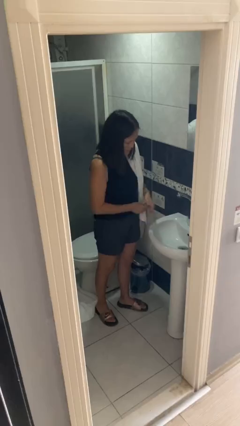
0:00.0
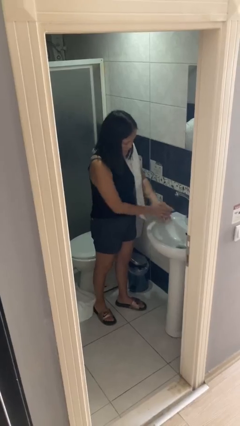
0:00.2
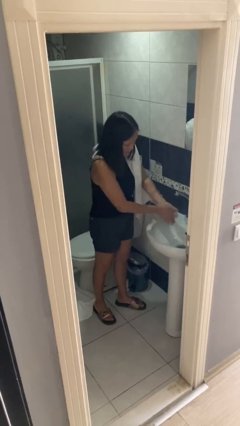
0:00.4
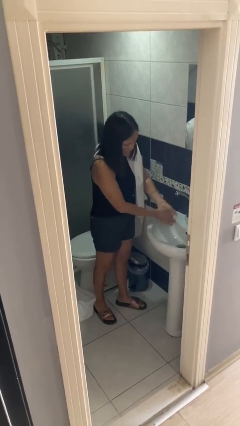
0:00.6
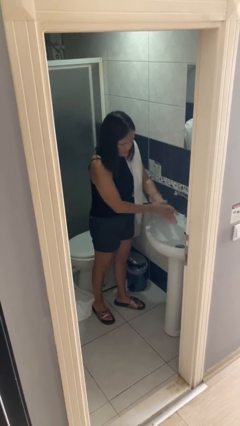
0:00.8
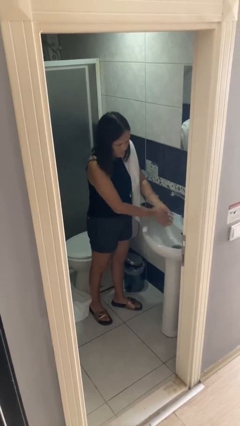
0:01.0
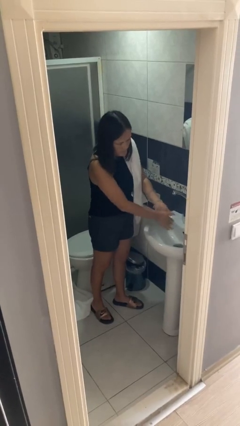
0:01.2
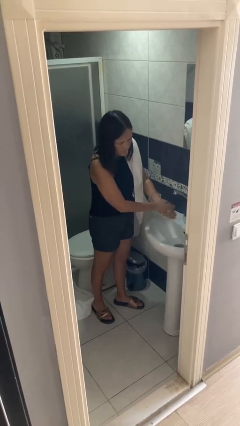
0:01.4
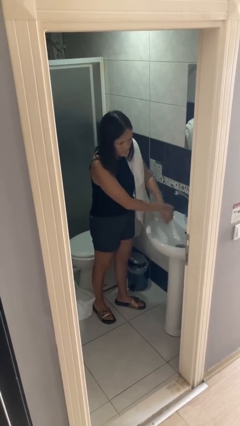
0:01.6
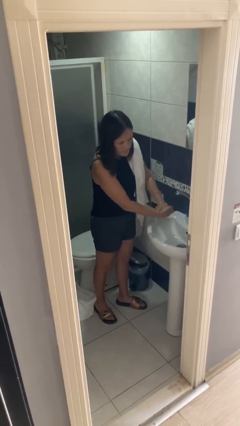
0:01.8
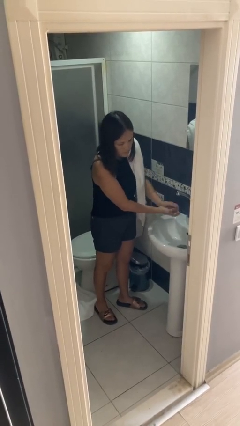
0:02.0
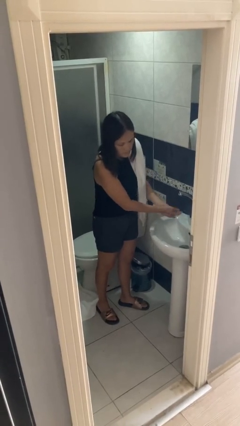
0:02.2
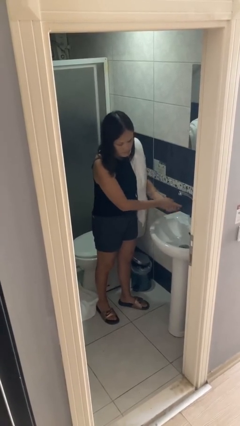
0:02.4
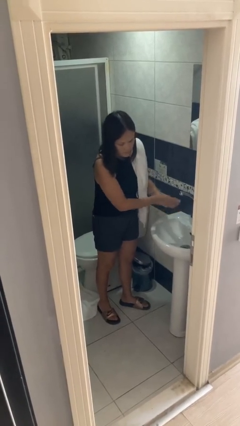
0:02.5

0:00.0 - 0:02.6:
person washes hands

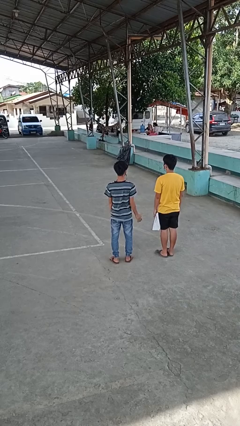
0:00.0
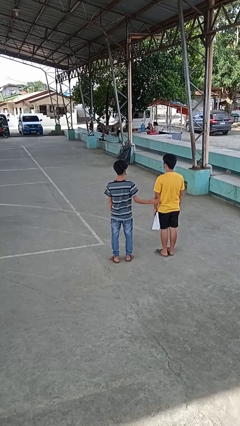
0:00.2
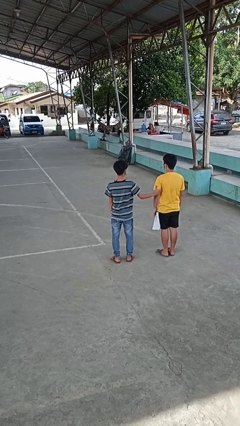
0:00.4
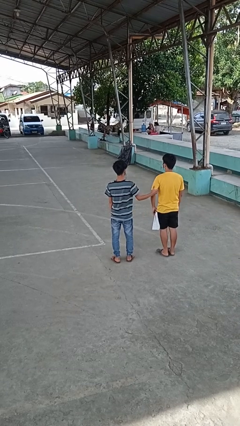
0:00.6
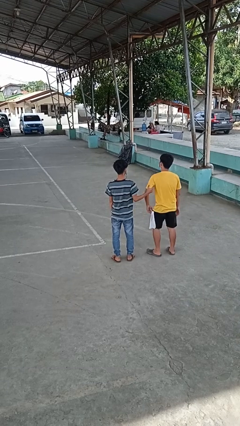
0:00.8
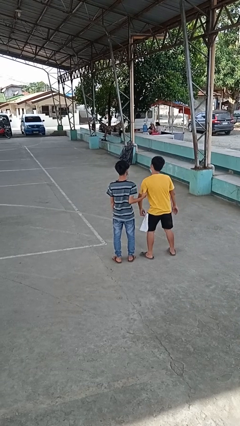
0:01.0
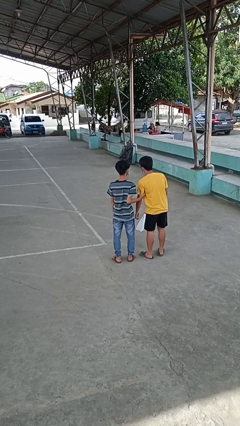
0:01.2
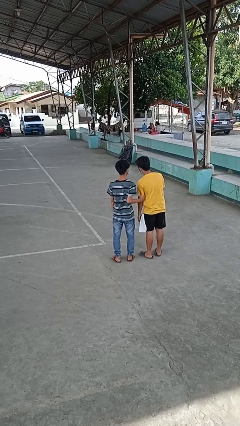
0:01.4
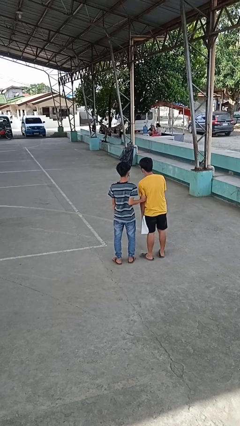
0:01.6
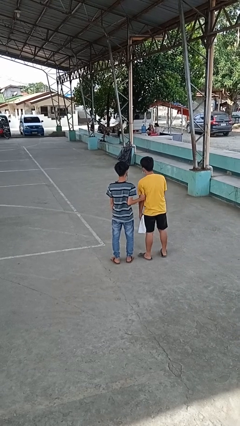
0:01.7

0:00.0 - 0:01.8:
person grabs person by bicep

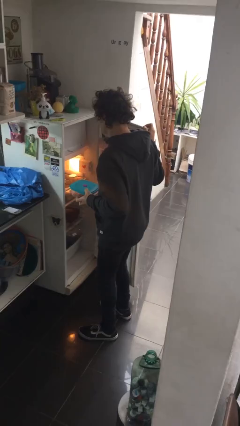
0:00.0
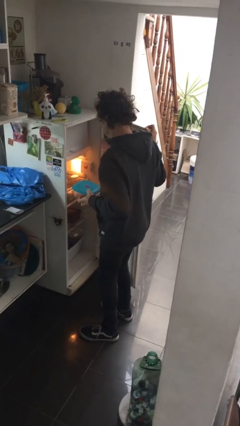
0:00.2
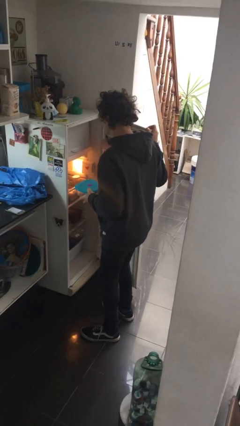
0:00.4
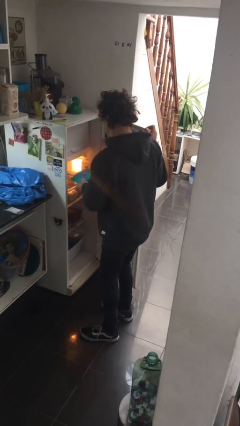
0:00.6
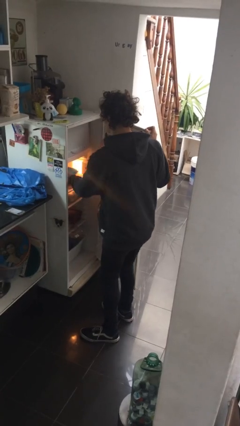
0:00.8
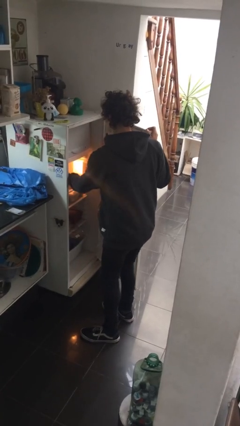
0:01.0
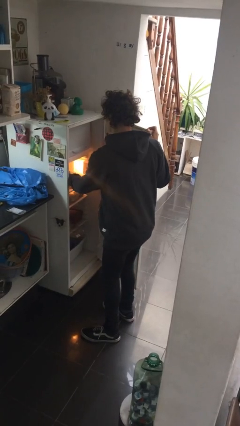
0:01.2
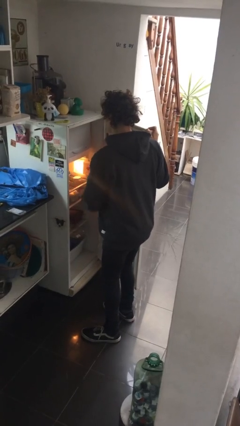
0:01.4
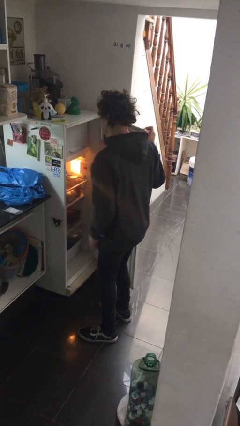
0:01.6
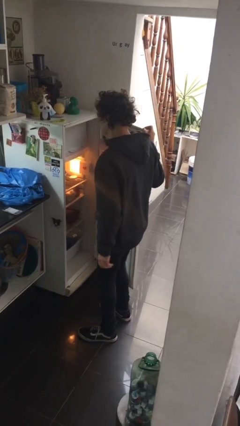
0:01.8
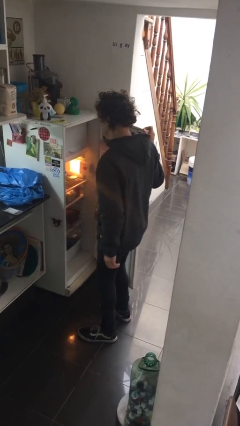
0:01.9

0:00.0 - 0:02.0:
person puts object into refrigerator

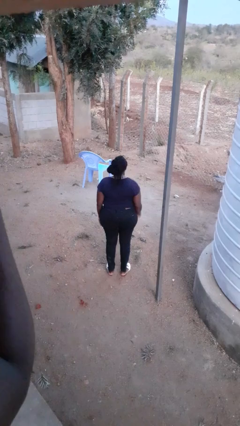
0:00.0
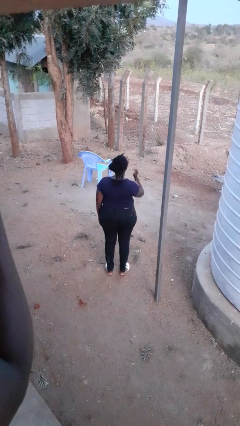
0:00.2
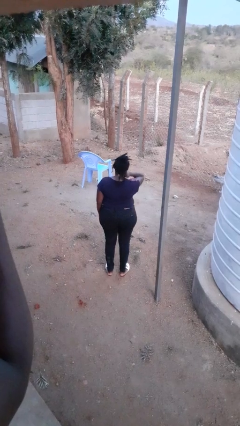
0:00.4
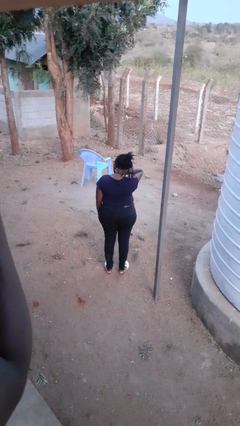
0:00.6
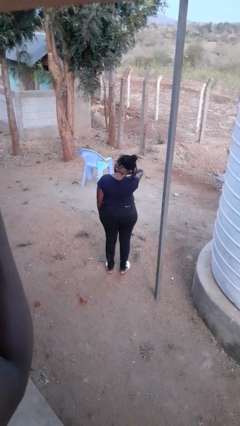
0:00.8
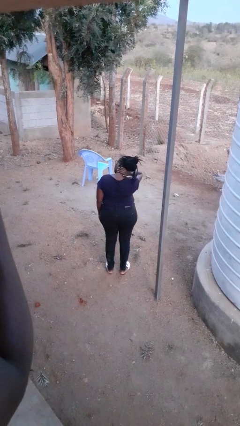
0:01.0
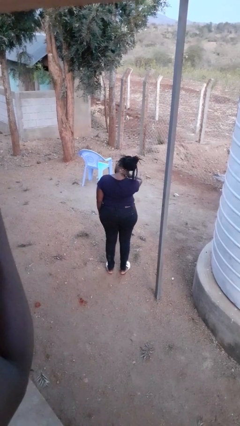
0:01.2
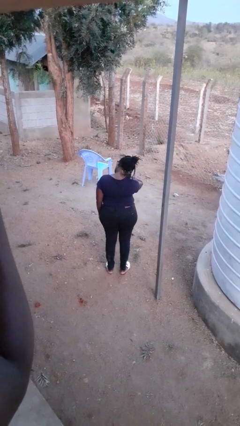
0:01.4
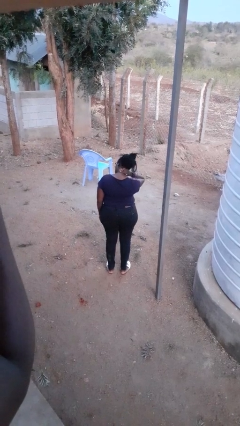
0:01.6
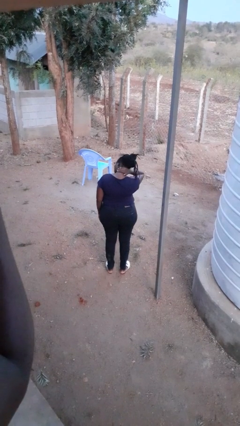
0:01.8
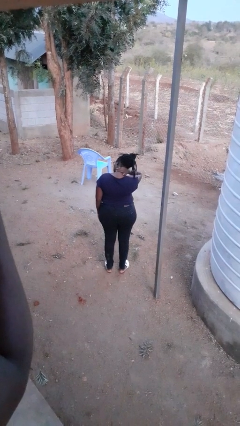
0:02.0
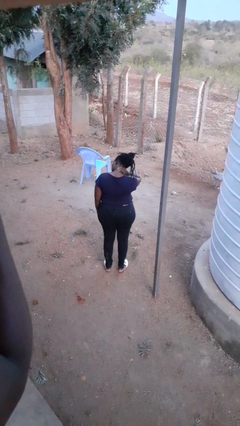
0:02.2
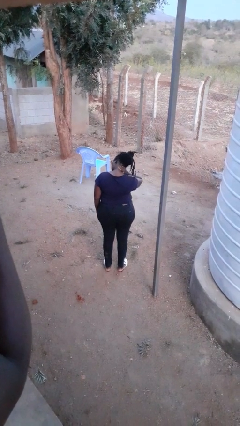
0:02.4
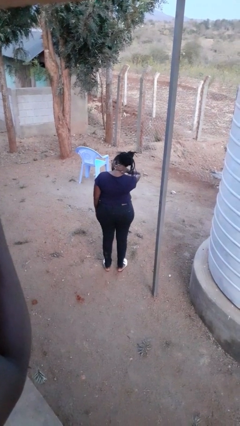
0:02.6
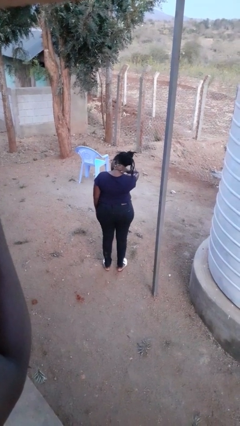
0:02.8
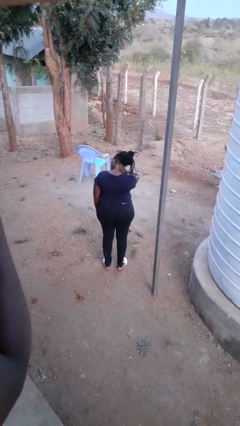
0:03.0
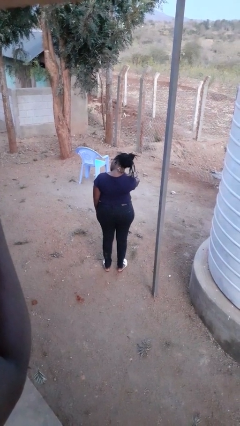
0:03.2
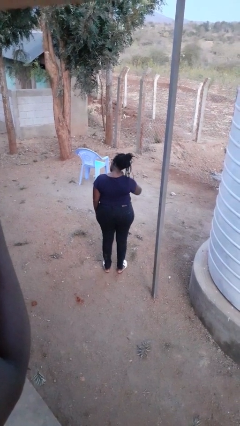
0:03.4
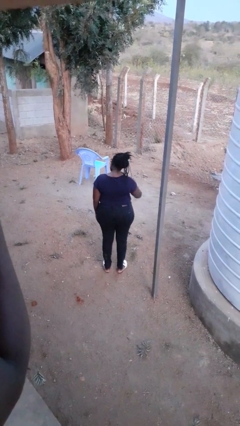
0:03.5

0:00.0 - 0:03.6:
person rubs neck

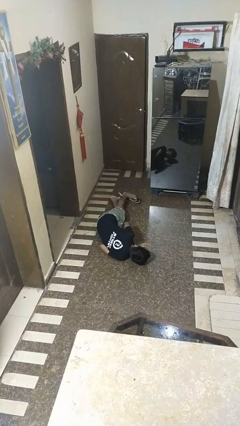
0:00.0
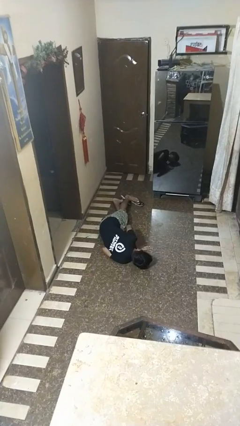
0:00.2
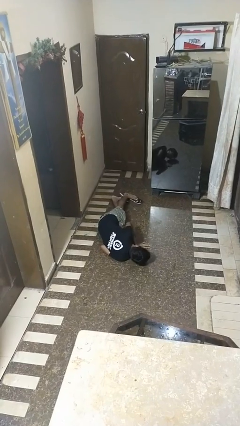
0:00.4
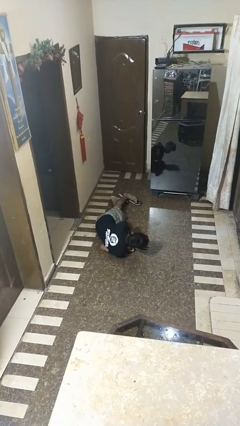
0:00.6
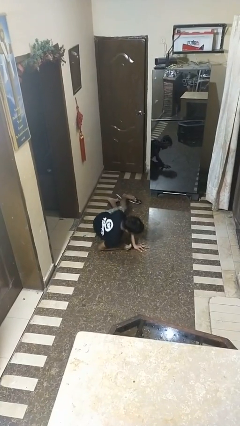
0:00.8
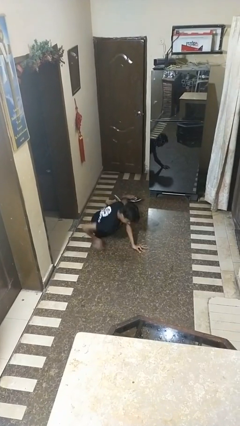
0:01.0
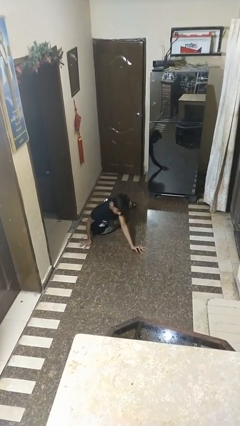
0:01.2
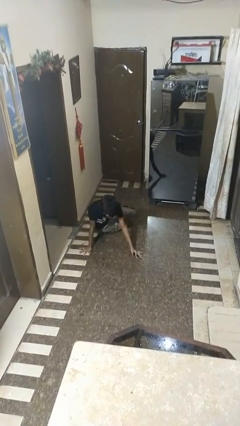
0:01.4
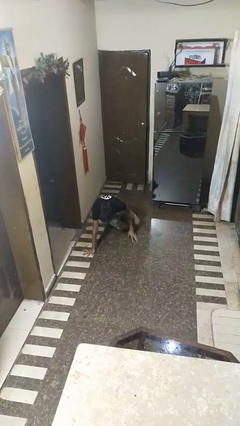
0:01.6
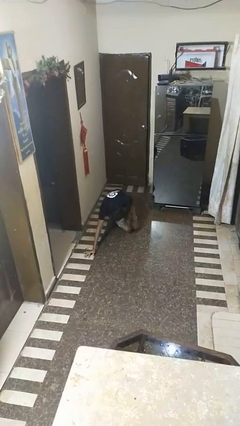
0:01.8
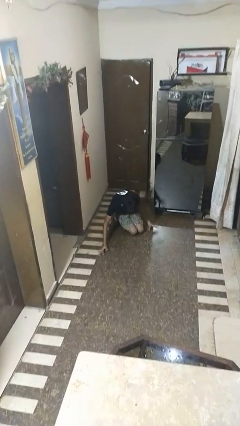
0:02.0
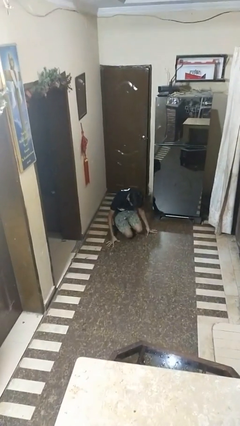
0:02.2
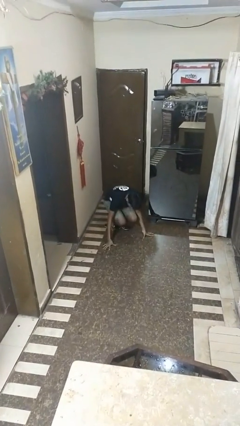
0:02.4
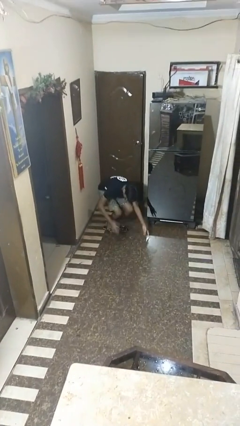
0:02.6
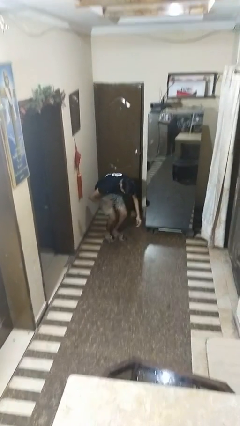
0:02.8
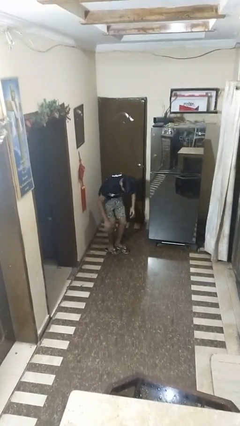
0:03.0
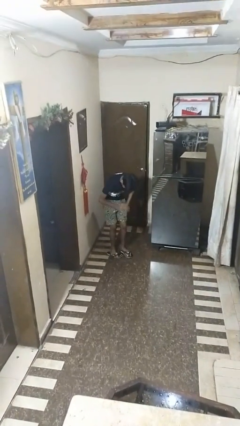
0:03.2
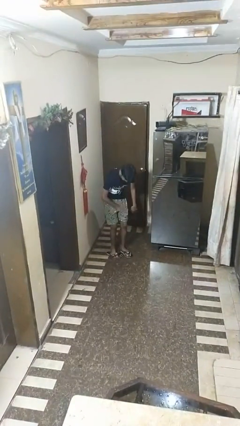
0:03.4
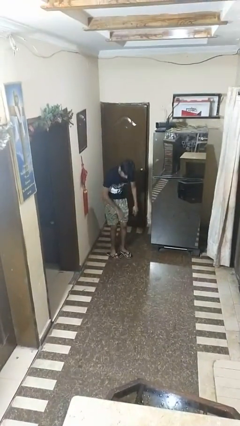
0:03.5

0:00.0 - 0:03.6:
person stands up from floor

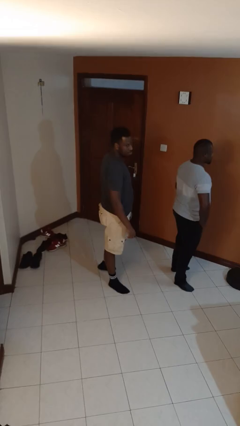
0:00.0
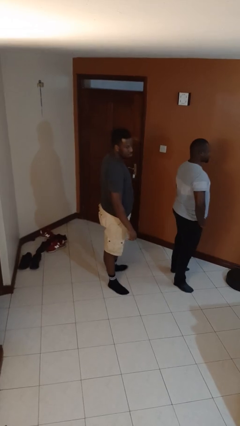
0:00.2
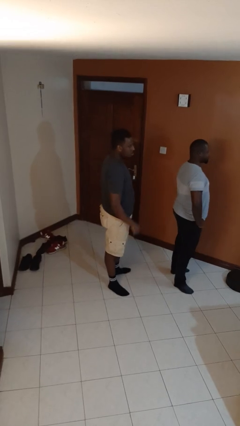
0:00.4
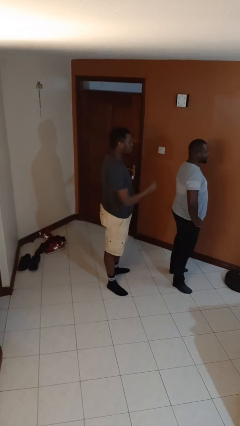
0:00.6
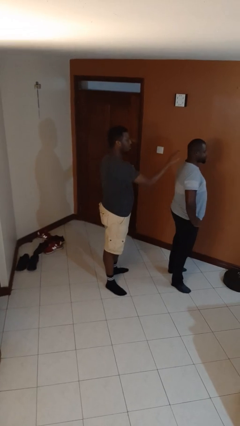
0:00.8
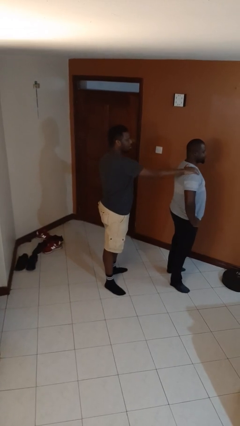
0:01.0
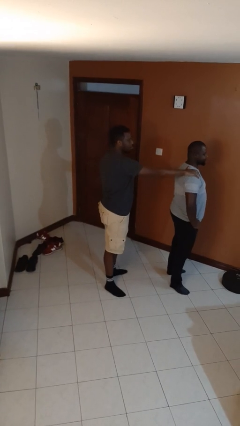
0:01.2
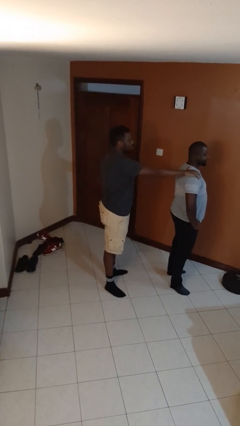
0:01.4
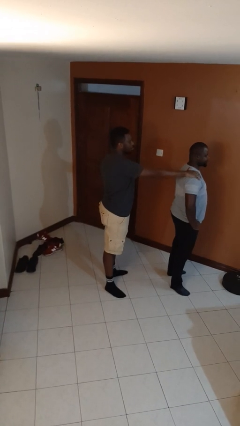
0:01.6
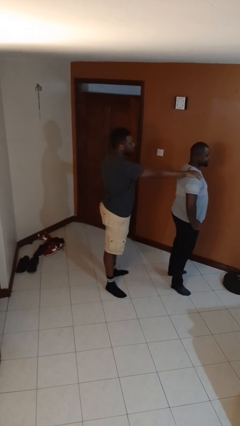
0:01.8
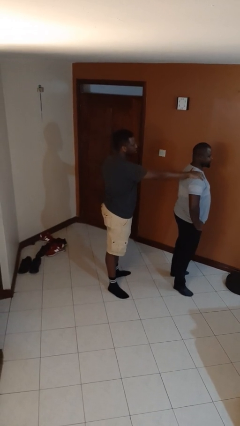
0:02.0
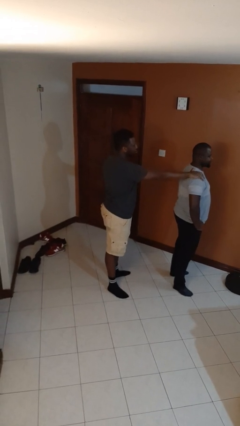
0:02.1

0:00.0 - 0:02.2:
person grabs person by shoulder

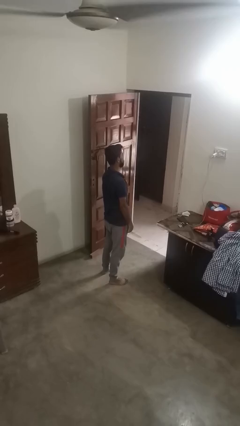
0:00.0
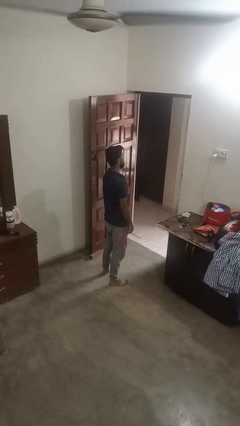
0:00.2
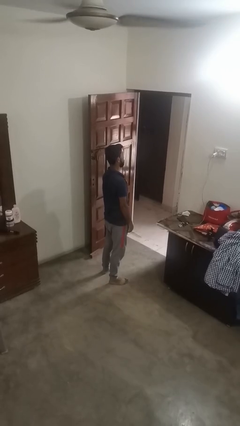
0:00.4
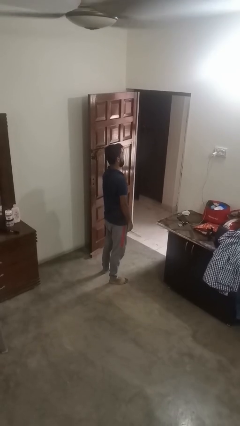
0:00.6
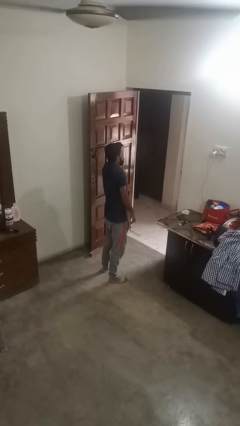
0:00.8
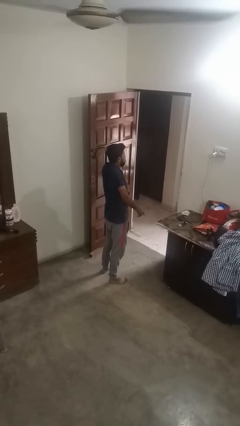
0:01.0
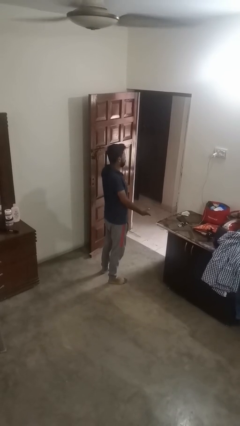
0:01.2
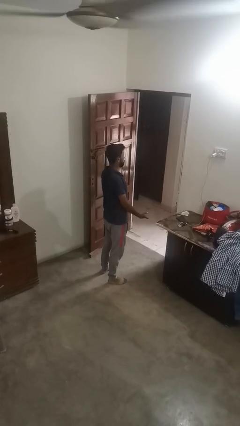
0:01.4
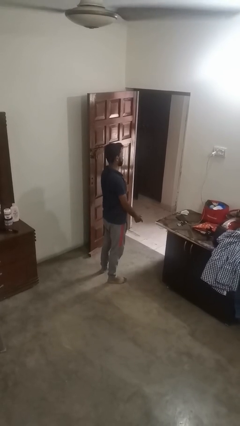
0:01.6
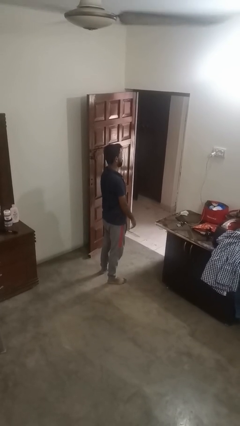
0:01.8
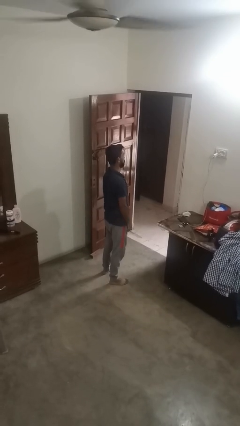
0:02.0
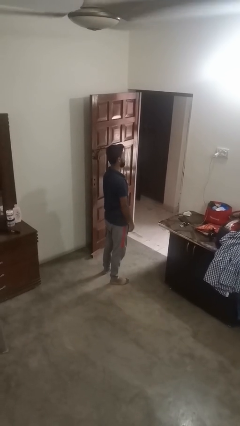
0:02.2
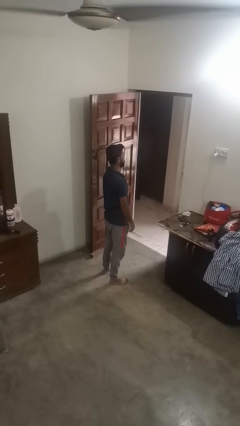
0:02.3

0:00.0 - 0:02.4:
person shrugs
